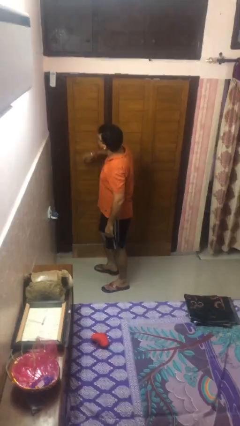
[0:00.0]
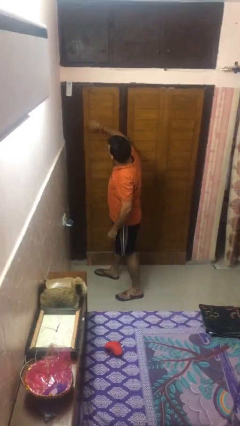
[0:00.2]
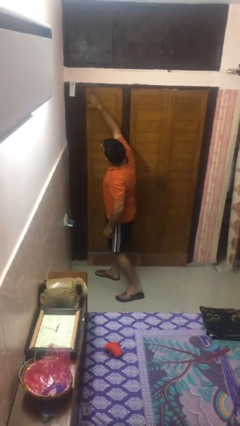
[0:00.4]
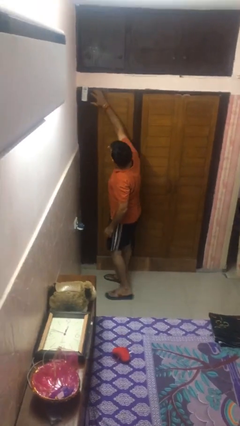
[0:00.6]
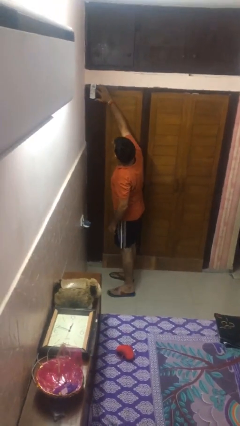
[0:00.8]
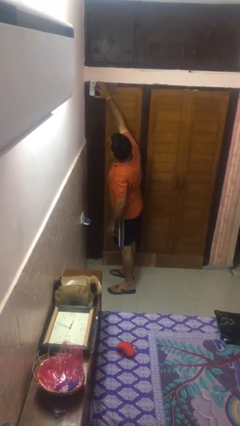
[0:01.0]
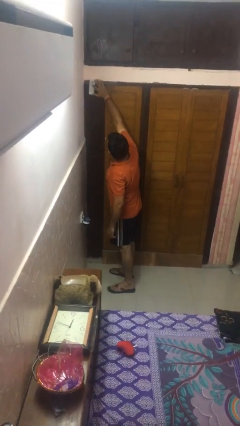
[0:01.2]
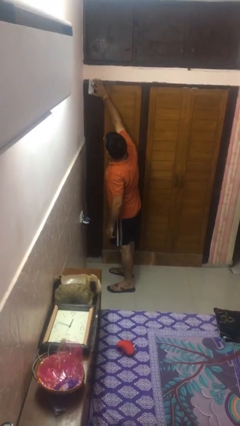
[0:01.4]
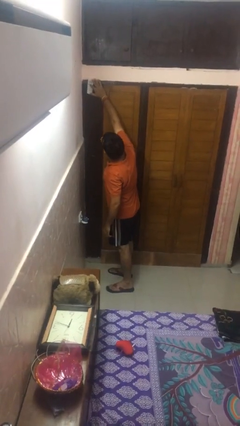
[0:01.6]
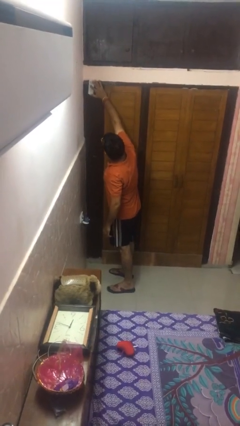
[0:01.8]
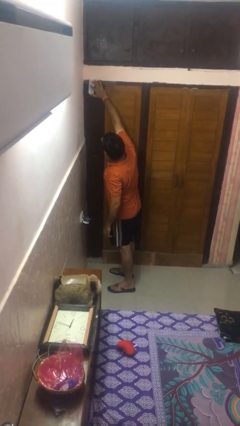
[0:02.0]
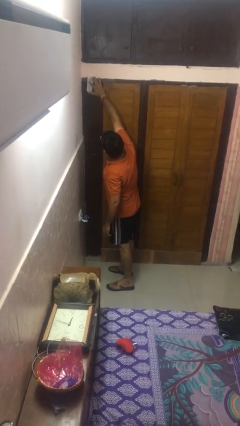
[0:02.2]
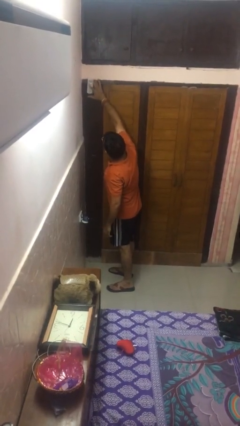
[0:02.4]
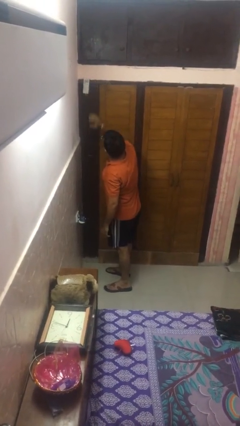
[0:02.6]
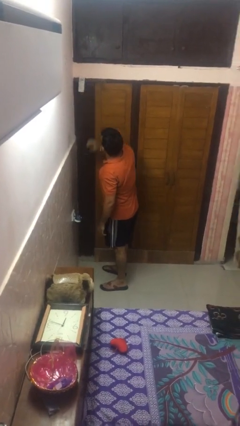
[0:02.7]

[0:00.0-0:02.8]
person adjusts thermostat

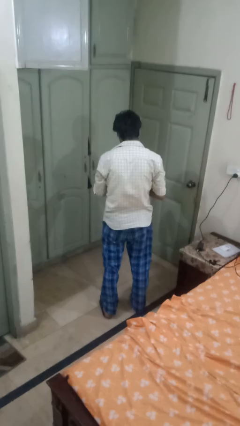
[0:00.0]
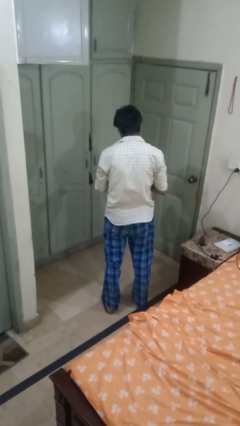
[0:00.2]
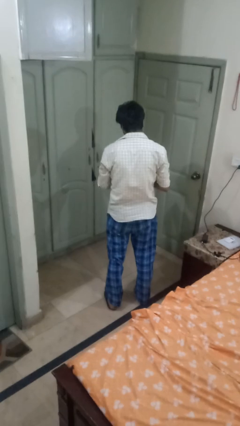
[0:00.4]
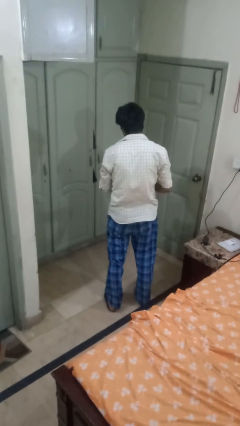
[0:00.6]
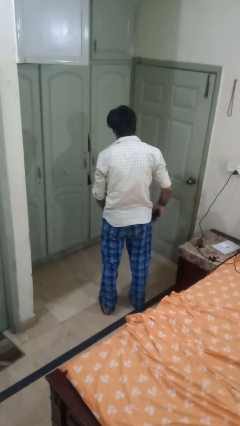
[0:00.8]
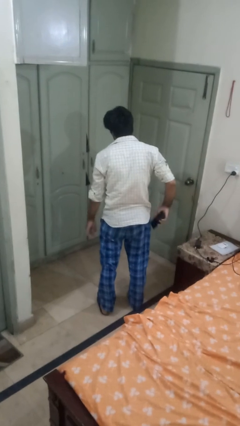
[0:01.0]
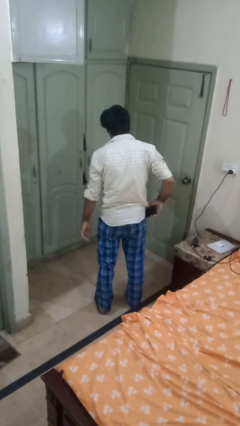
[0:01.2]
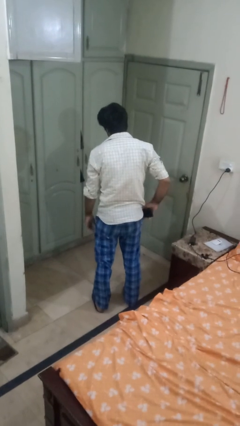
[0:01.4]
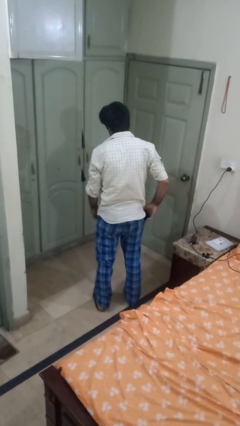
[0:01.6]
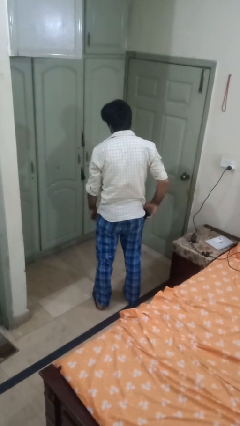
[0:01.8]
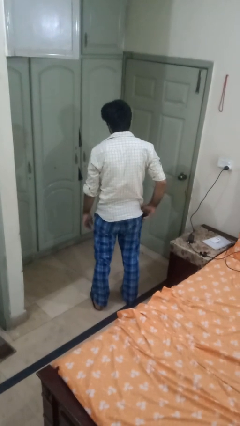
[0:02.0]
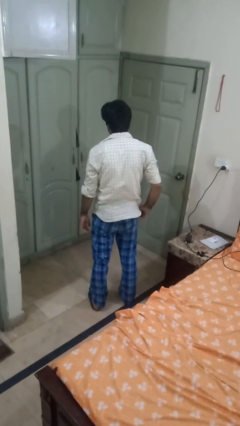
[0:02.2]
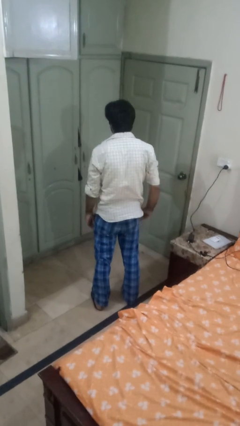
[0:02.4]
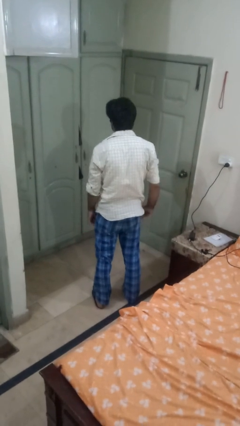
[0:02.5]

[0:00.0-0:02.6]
person puts phone into pocket

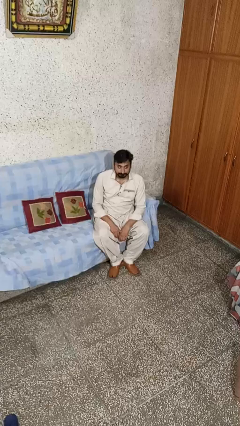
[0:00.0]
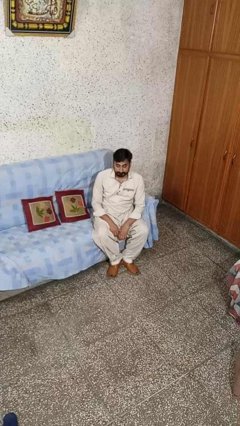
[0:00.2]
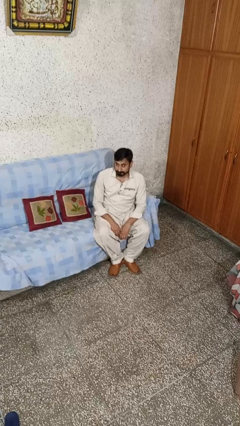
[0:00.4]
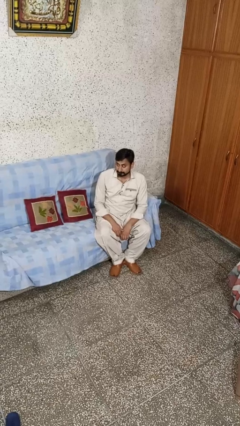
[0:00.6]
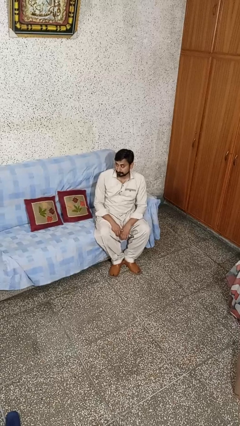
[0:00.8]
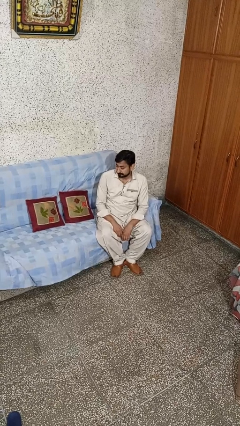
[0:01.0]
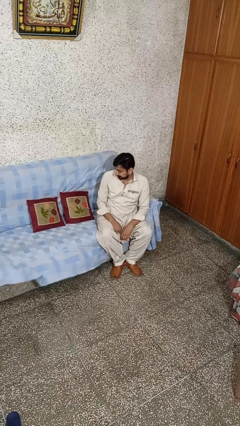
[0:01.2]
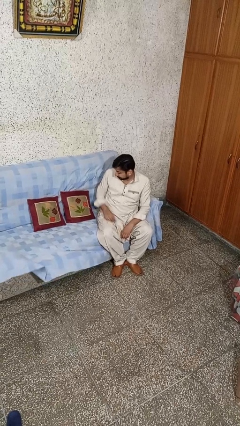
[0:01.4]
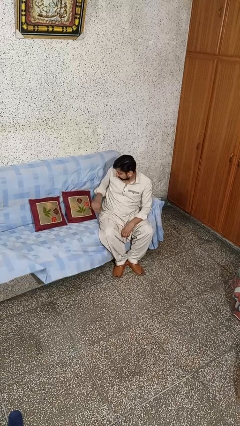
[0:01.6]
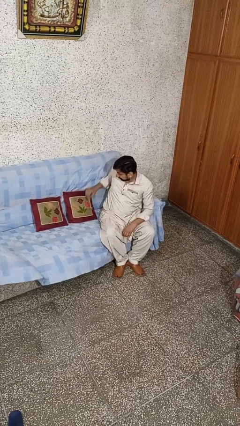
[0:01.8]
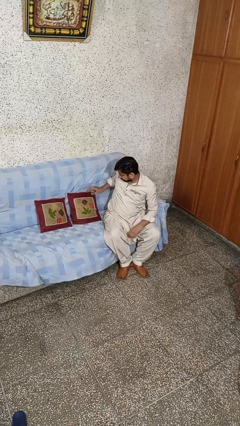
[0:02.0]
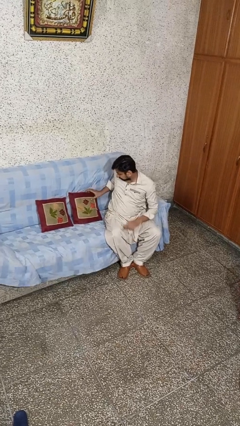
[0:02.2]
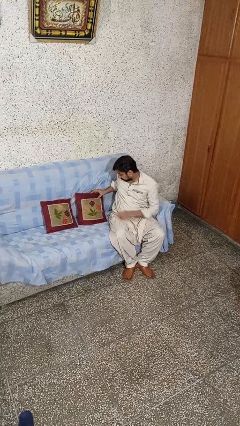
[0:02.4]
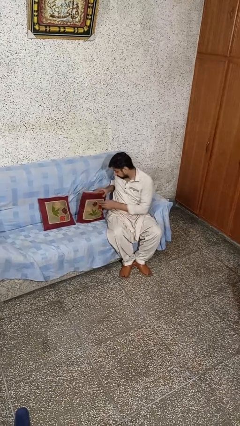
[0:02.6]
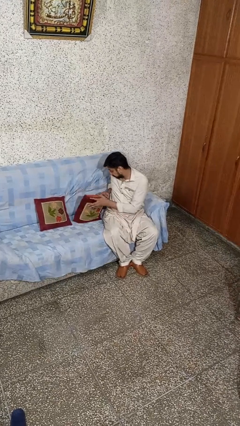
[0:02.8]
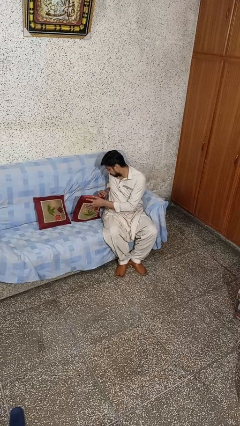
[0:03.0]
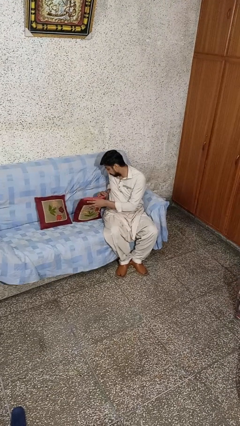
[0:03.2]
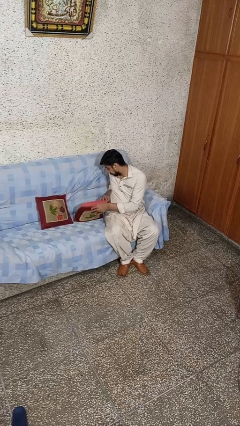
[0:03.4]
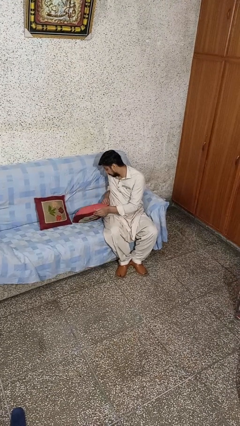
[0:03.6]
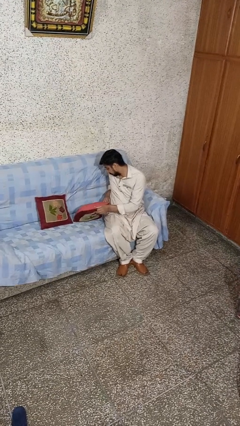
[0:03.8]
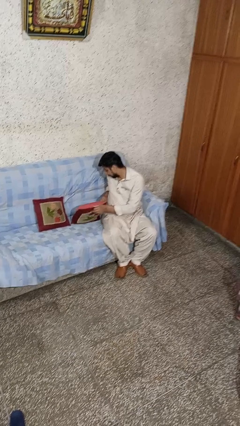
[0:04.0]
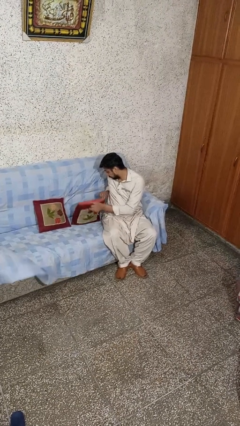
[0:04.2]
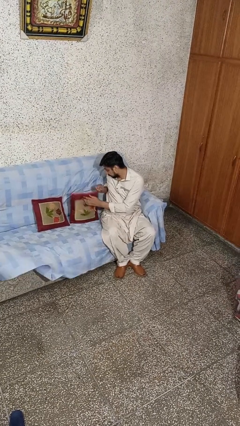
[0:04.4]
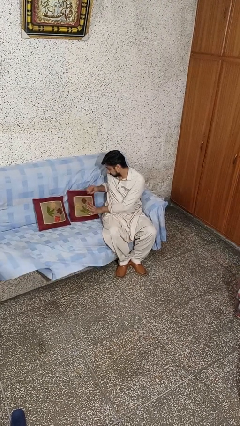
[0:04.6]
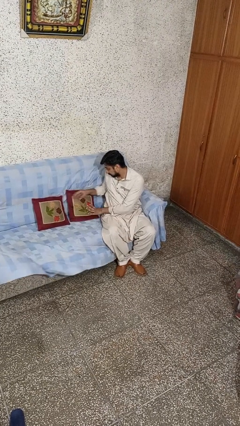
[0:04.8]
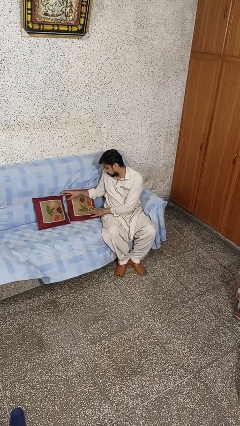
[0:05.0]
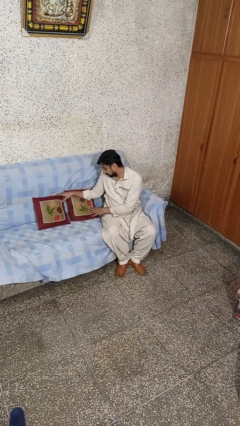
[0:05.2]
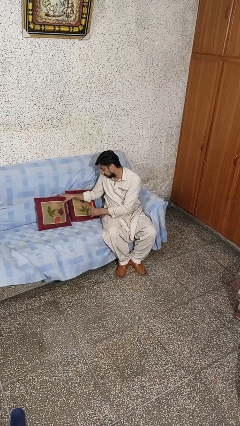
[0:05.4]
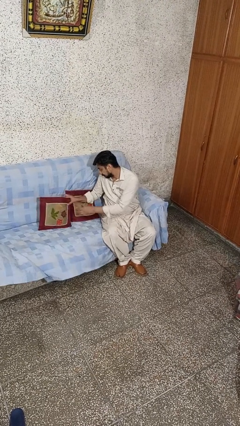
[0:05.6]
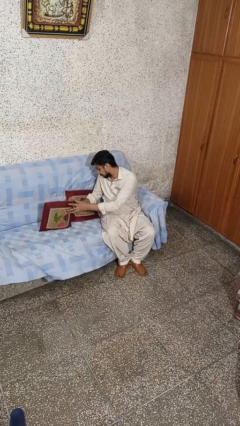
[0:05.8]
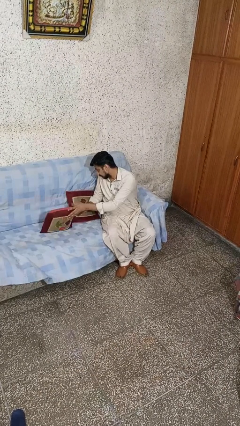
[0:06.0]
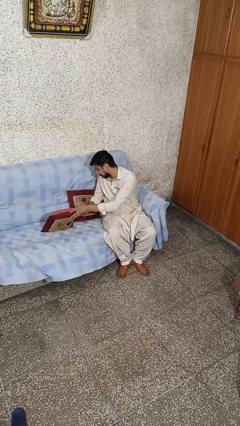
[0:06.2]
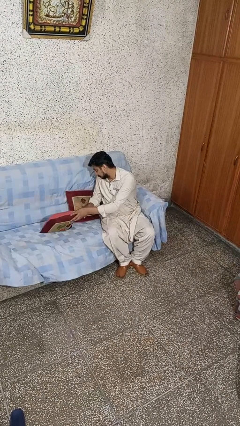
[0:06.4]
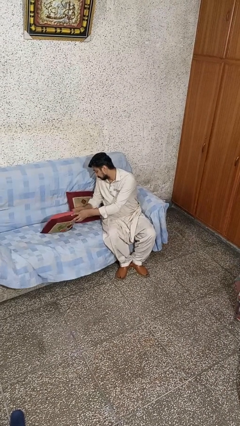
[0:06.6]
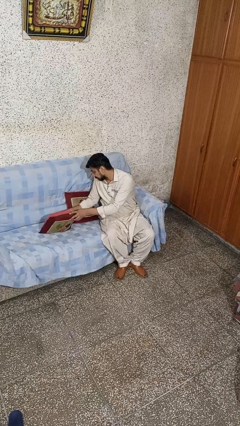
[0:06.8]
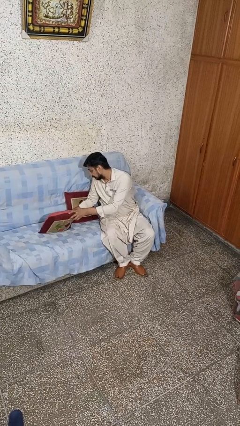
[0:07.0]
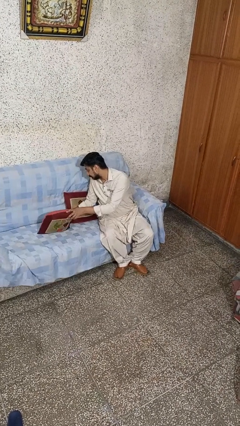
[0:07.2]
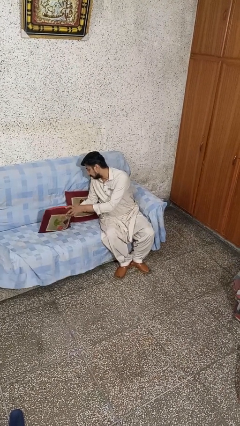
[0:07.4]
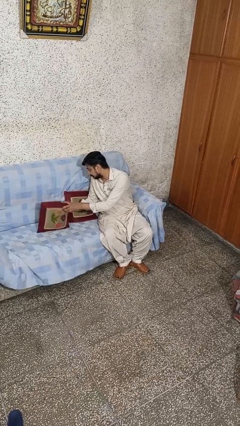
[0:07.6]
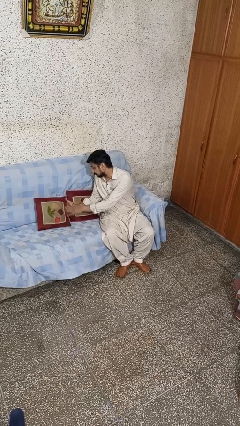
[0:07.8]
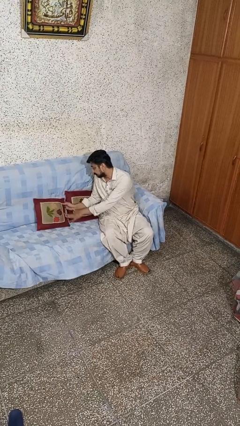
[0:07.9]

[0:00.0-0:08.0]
person searches in couch

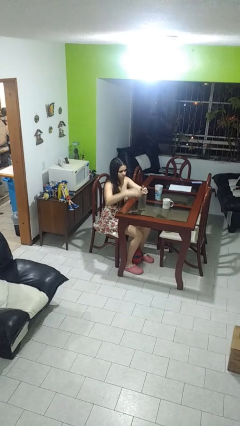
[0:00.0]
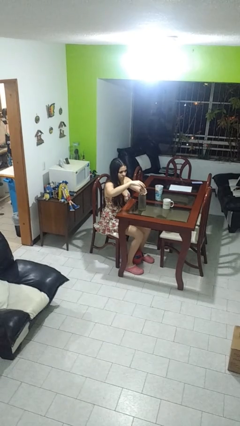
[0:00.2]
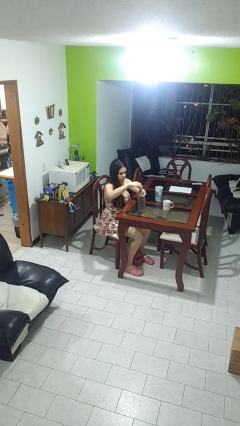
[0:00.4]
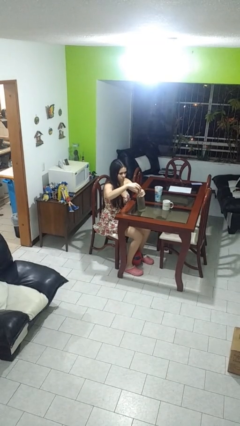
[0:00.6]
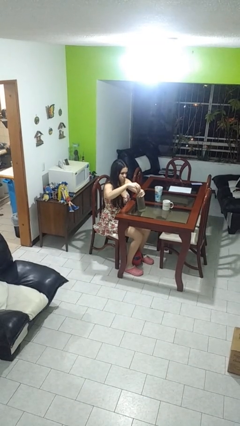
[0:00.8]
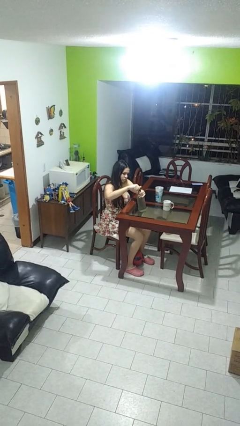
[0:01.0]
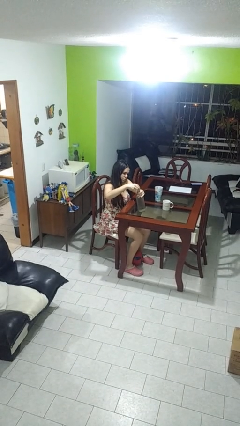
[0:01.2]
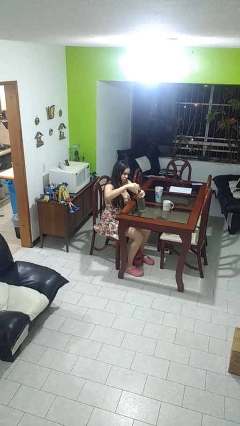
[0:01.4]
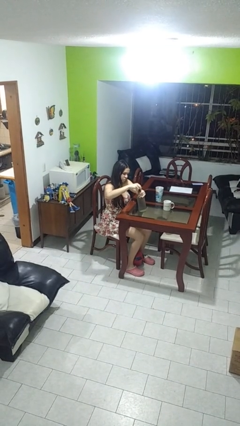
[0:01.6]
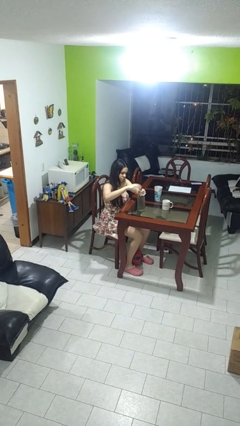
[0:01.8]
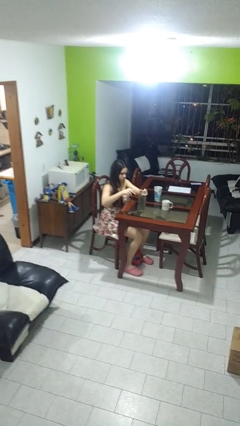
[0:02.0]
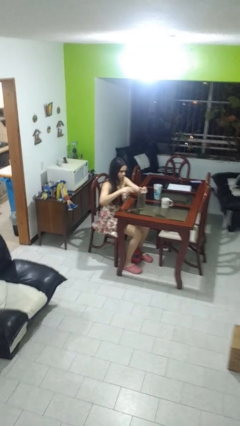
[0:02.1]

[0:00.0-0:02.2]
person screws lid to bottle

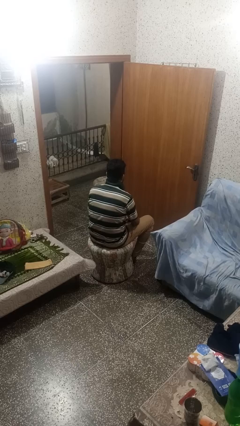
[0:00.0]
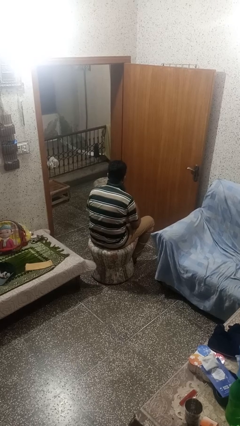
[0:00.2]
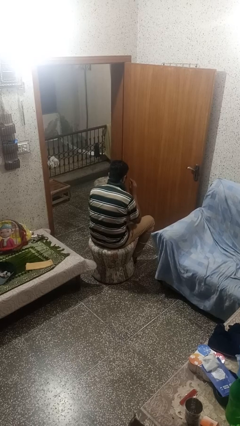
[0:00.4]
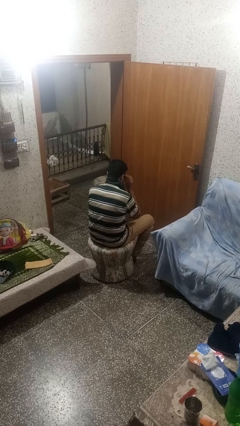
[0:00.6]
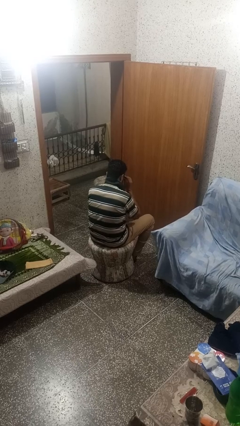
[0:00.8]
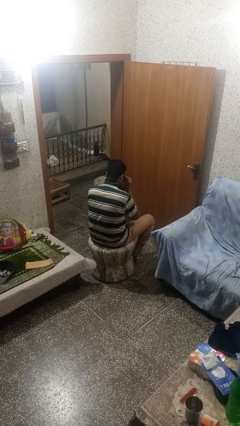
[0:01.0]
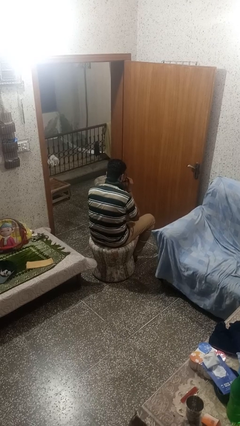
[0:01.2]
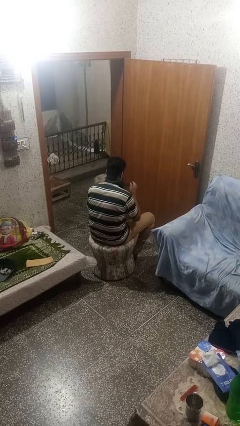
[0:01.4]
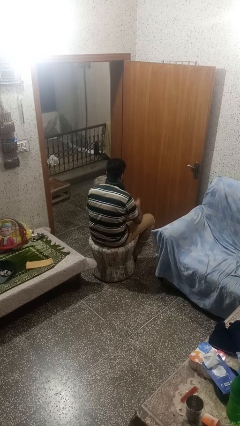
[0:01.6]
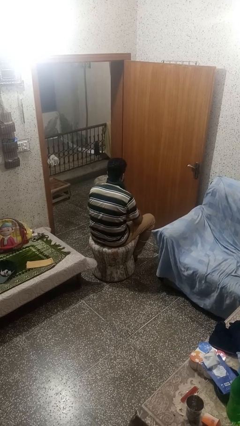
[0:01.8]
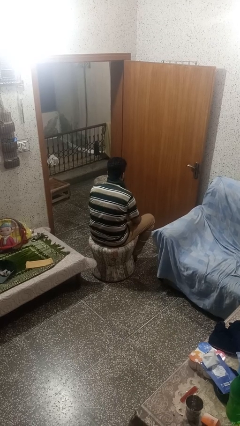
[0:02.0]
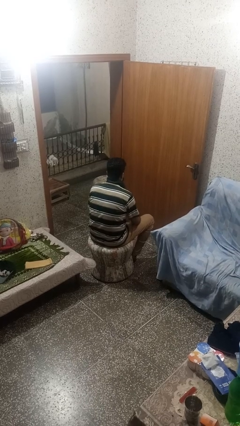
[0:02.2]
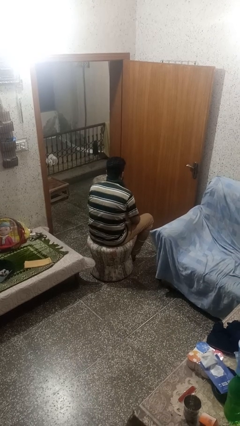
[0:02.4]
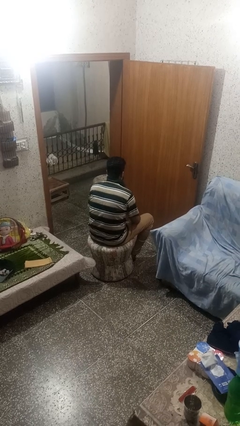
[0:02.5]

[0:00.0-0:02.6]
person takes off glasses
